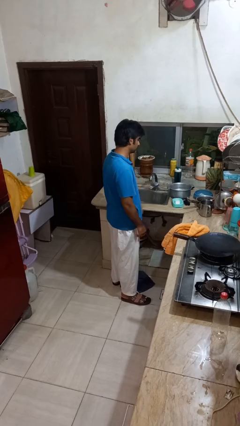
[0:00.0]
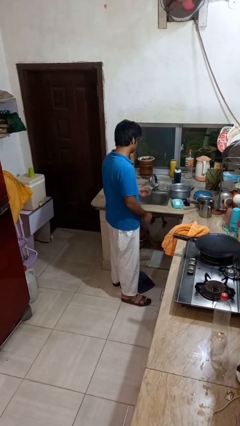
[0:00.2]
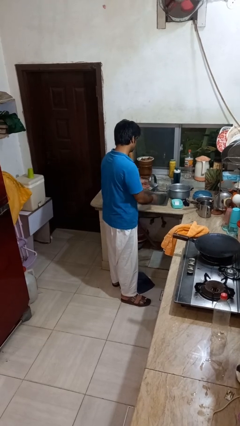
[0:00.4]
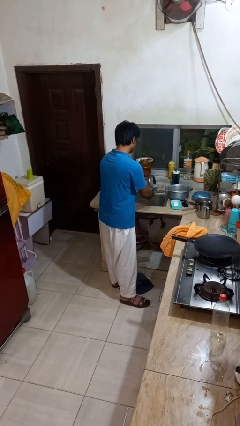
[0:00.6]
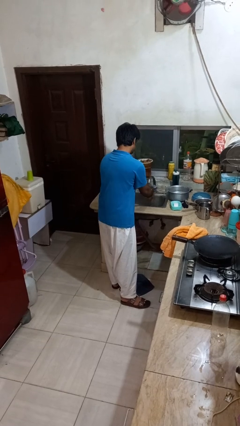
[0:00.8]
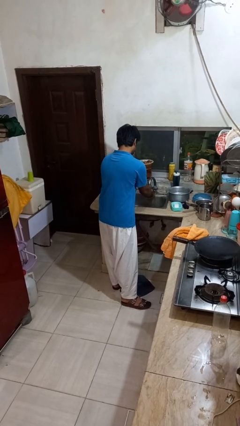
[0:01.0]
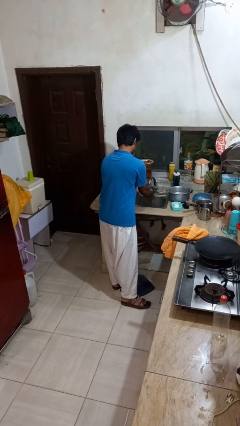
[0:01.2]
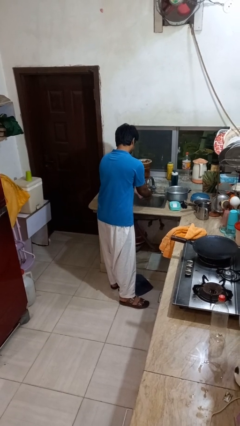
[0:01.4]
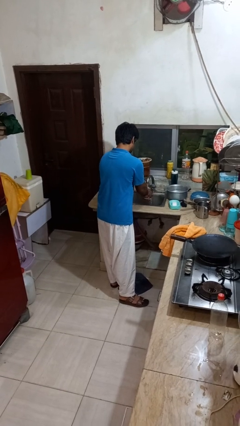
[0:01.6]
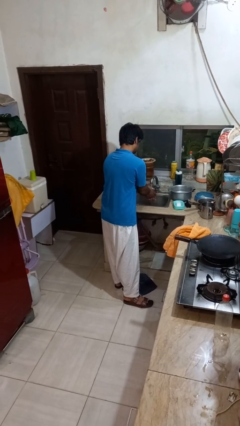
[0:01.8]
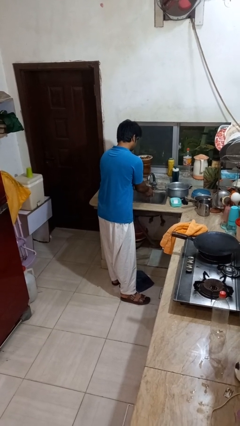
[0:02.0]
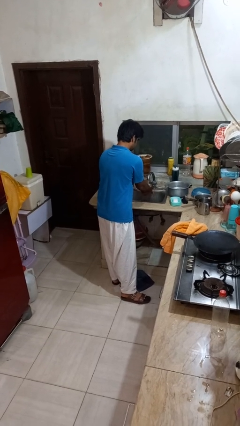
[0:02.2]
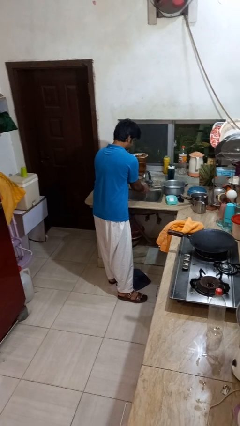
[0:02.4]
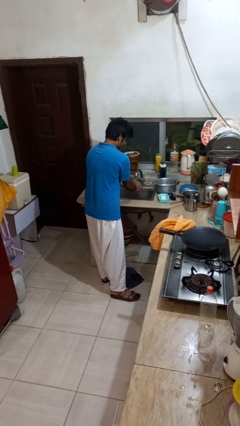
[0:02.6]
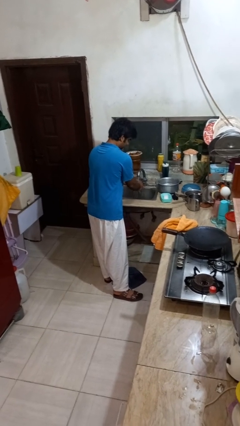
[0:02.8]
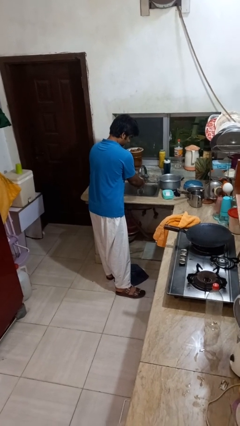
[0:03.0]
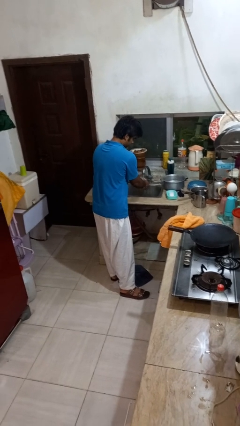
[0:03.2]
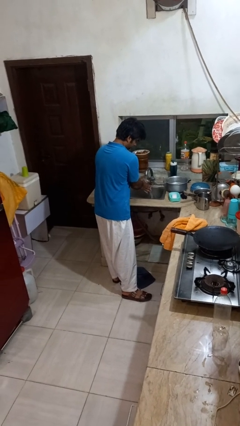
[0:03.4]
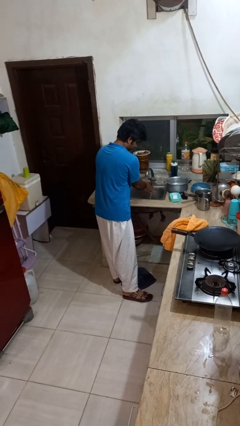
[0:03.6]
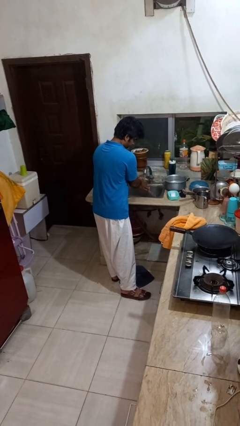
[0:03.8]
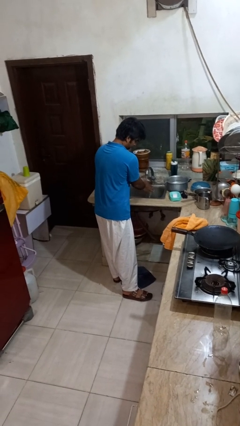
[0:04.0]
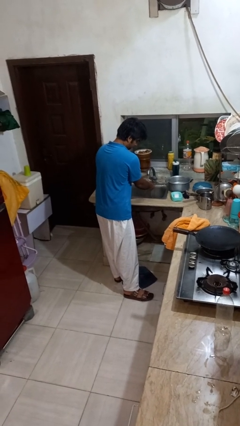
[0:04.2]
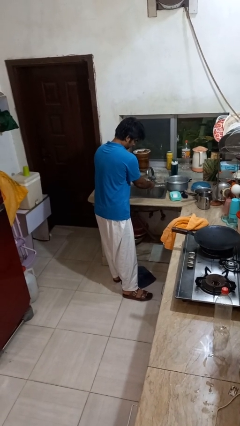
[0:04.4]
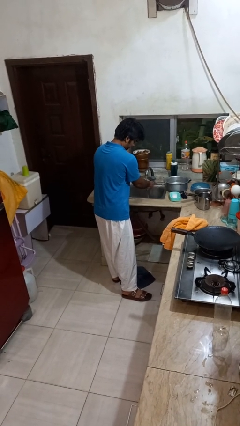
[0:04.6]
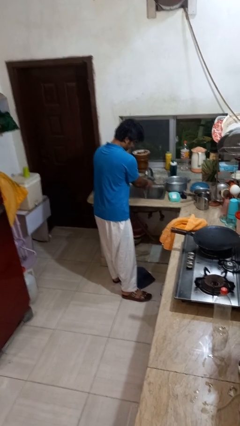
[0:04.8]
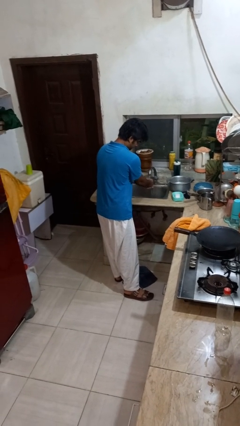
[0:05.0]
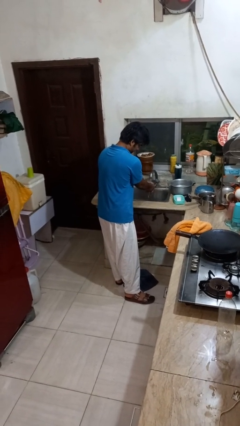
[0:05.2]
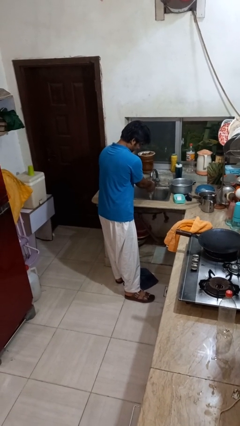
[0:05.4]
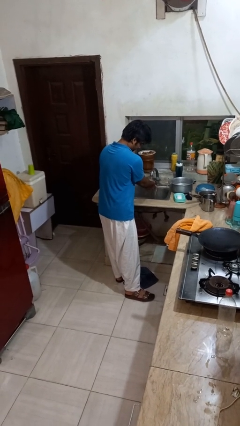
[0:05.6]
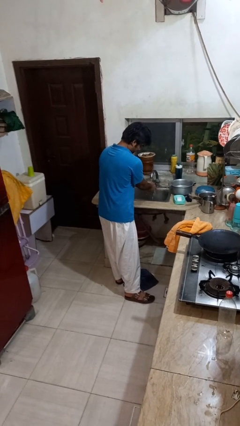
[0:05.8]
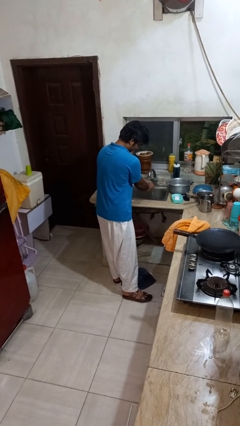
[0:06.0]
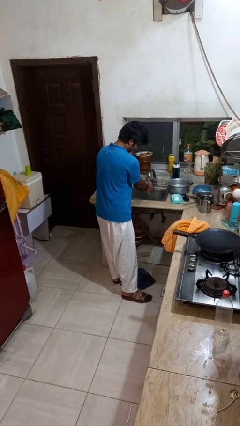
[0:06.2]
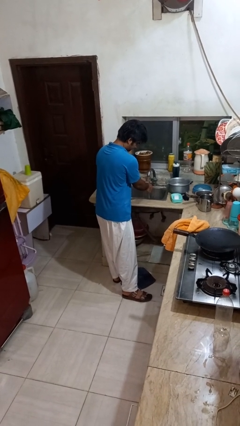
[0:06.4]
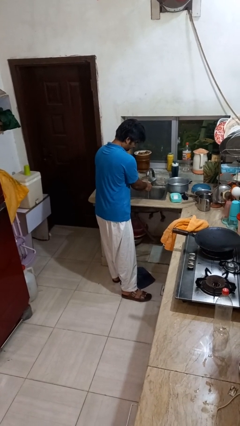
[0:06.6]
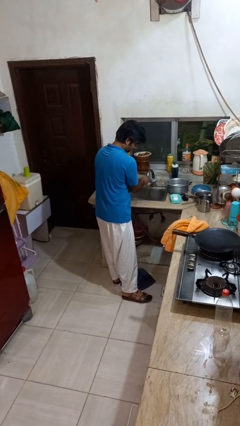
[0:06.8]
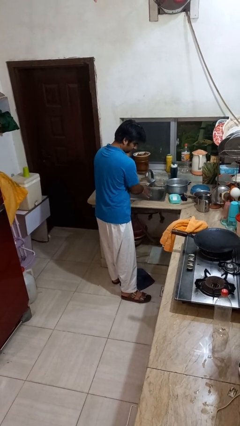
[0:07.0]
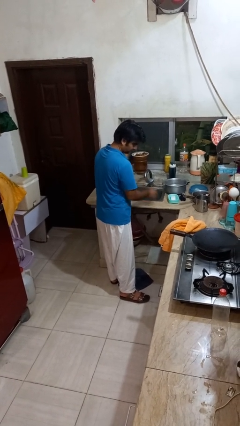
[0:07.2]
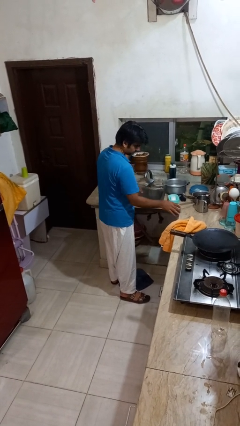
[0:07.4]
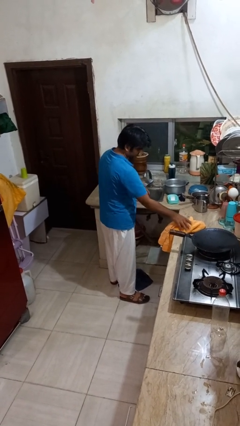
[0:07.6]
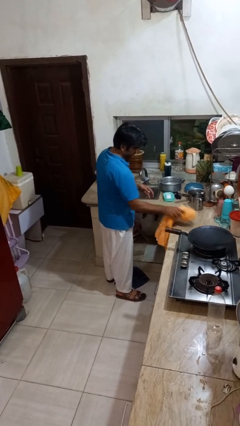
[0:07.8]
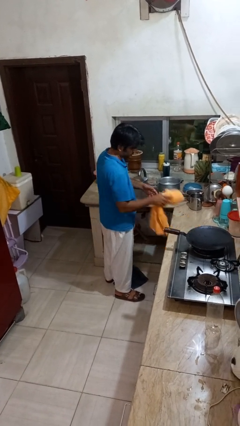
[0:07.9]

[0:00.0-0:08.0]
person washes hands

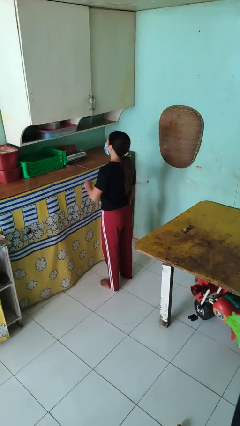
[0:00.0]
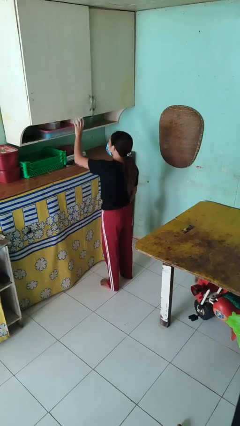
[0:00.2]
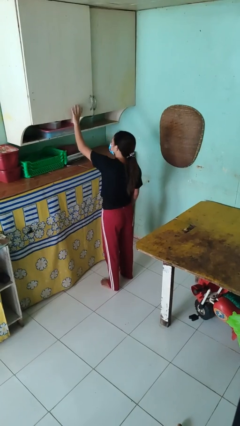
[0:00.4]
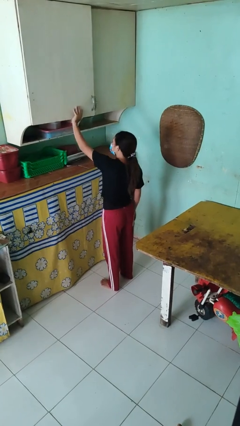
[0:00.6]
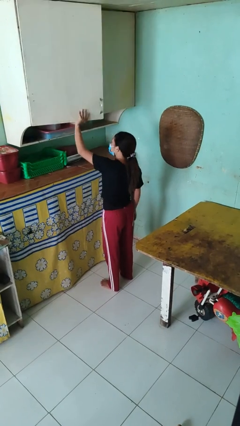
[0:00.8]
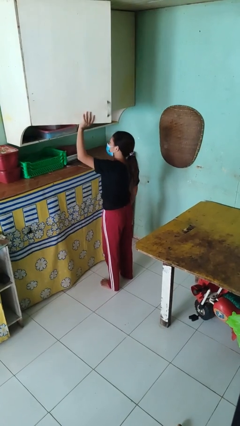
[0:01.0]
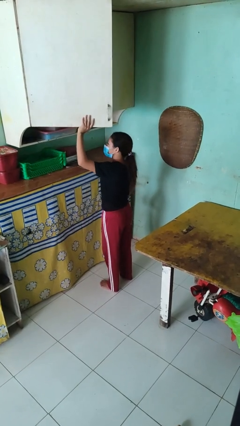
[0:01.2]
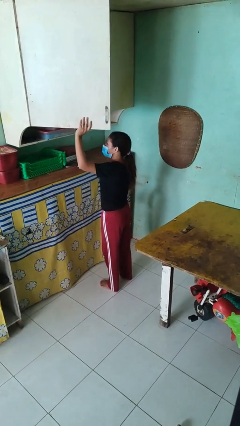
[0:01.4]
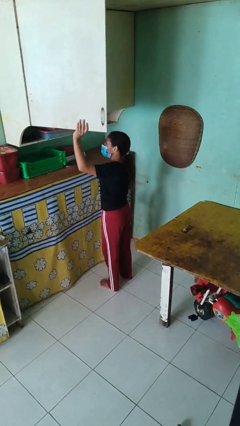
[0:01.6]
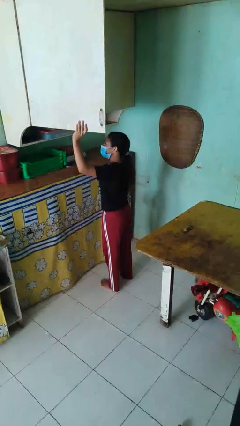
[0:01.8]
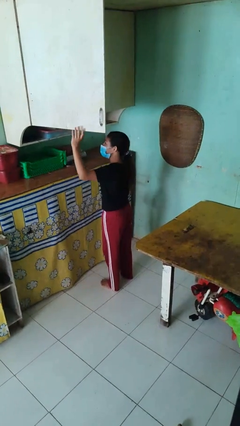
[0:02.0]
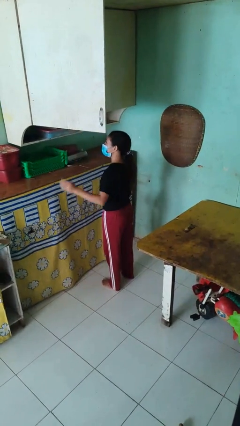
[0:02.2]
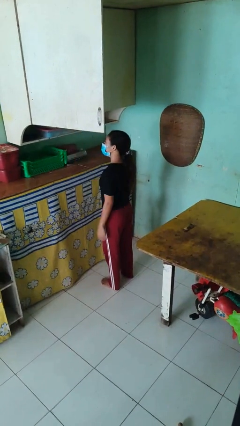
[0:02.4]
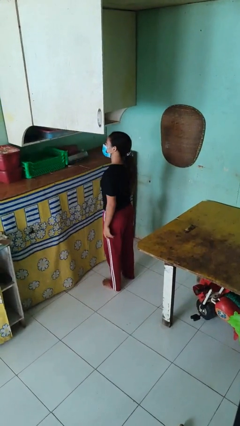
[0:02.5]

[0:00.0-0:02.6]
person opens cabinet

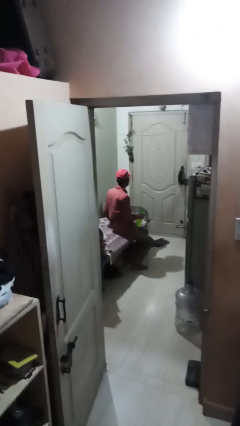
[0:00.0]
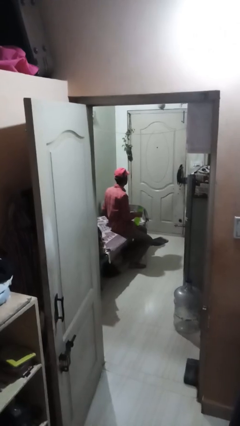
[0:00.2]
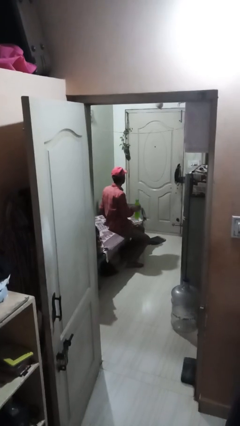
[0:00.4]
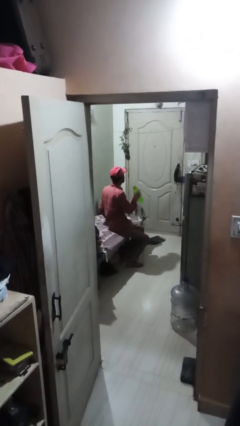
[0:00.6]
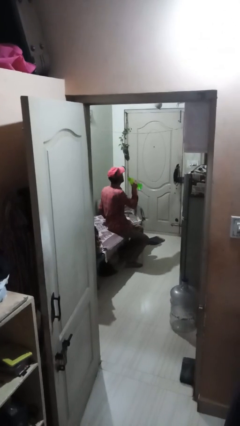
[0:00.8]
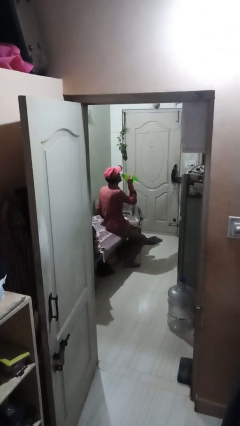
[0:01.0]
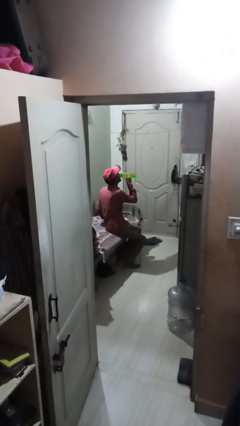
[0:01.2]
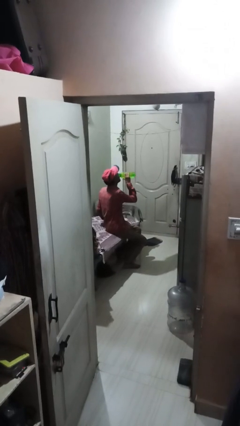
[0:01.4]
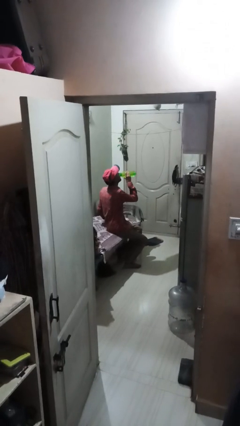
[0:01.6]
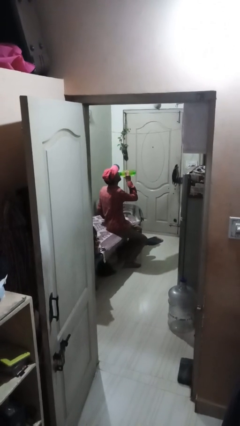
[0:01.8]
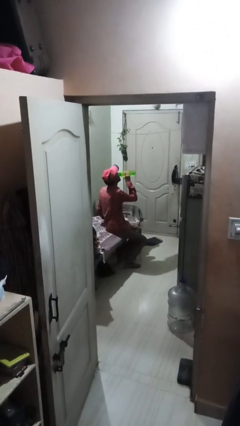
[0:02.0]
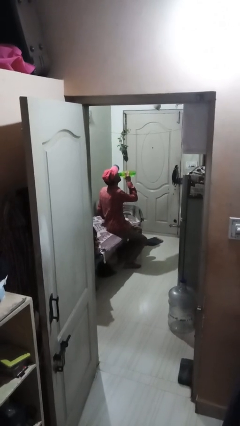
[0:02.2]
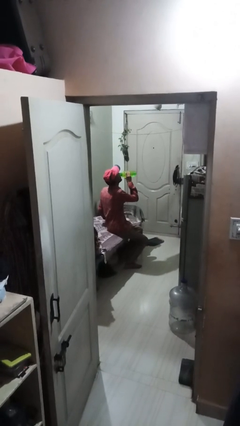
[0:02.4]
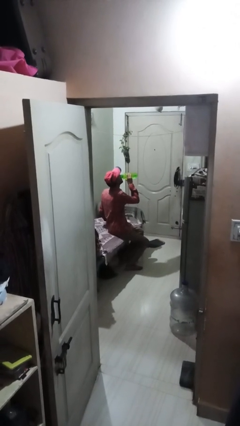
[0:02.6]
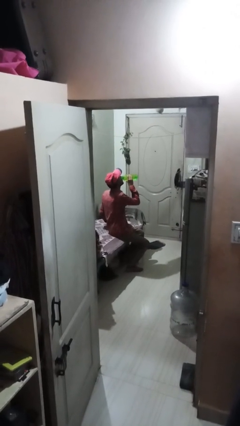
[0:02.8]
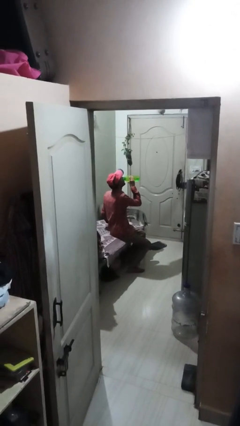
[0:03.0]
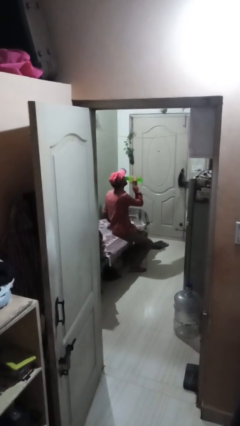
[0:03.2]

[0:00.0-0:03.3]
person drinks from bottle

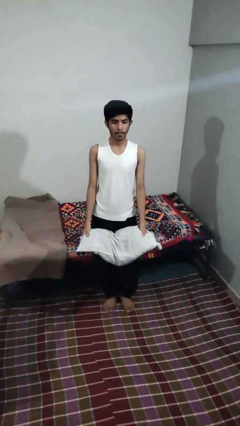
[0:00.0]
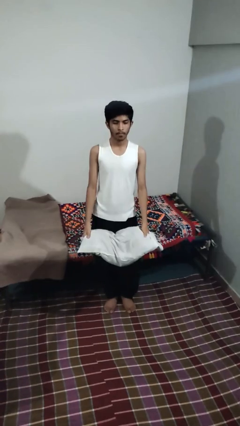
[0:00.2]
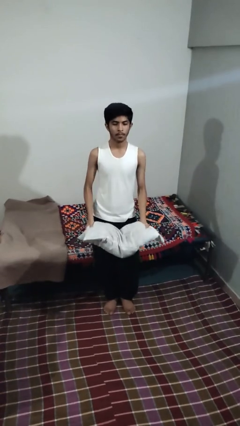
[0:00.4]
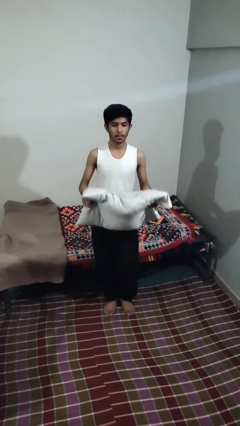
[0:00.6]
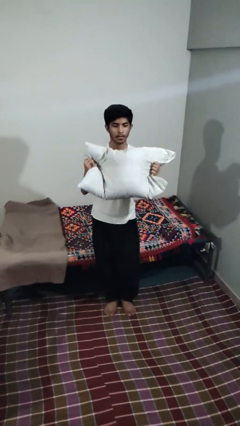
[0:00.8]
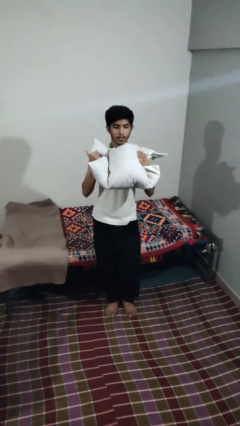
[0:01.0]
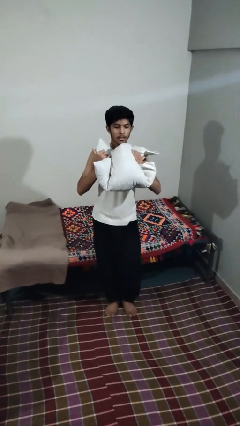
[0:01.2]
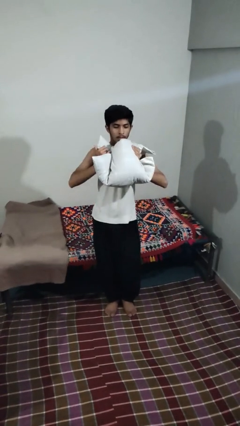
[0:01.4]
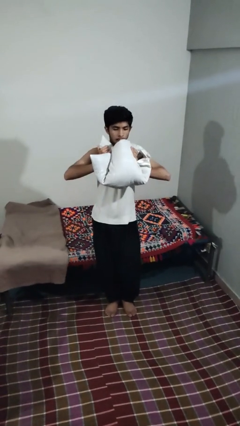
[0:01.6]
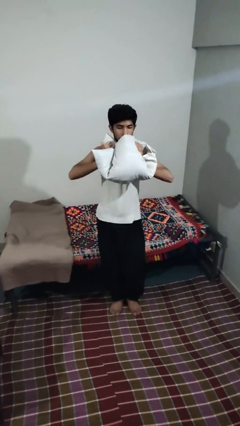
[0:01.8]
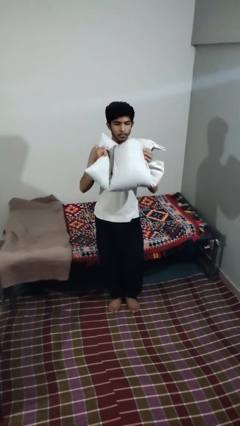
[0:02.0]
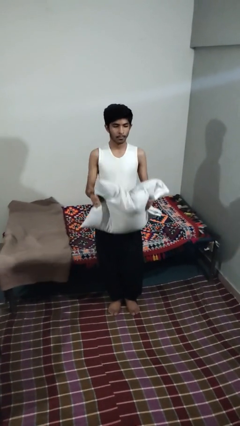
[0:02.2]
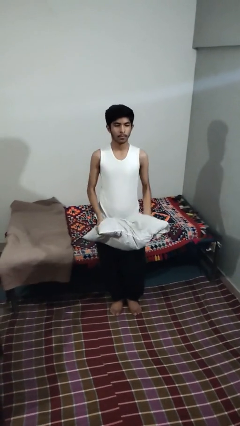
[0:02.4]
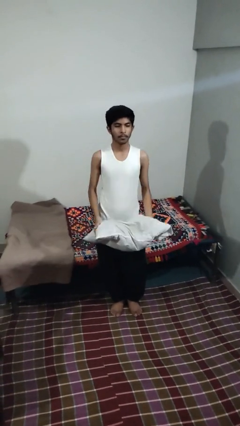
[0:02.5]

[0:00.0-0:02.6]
person squeezes object

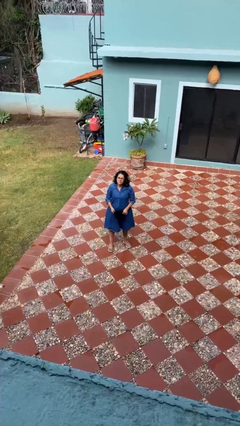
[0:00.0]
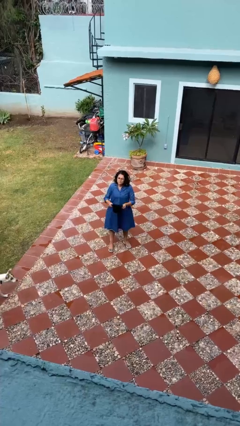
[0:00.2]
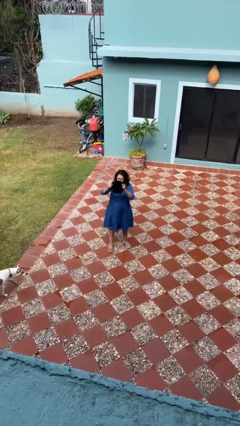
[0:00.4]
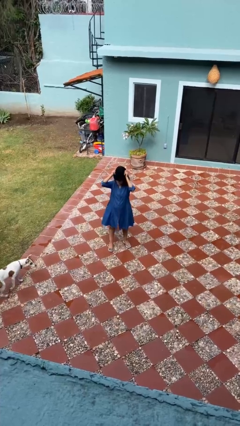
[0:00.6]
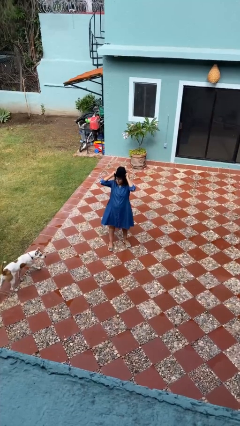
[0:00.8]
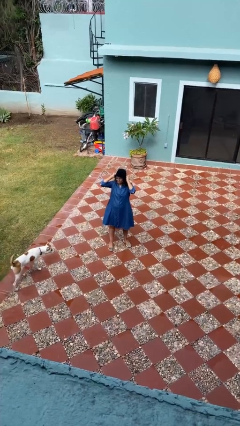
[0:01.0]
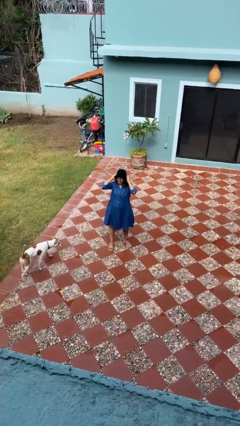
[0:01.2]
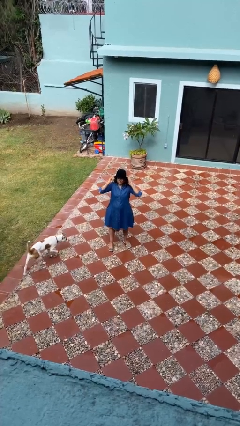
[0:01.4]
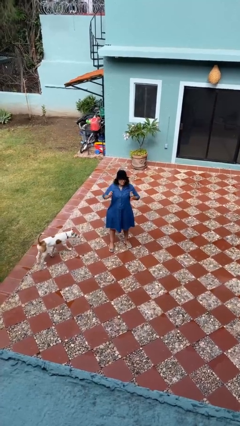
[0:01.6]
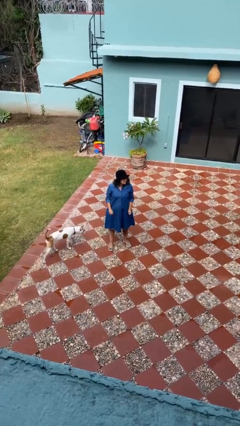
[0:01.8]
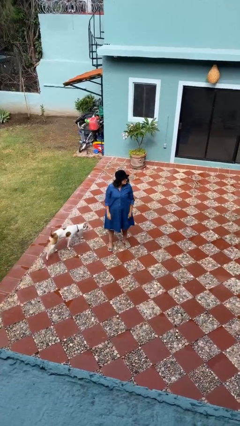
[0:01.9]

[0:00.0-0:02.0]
person puts on hat
